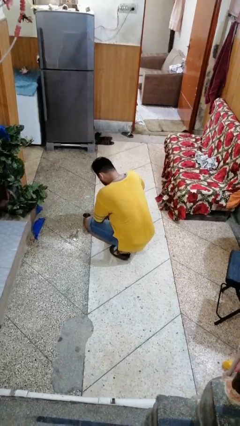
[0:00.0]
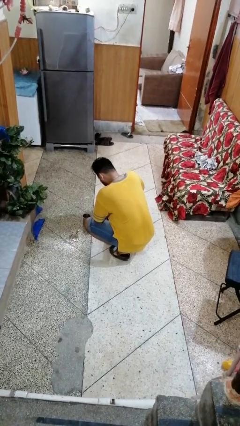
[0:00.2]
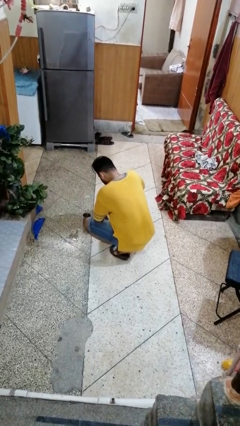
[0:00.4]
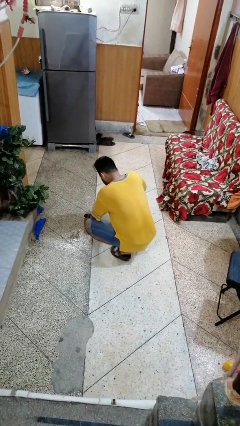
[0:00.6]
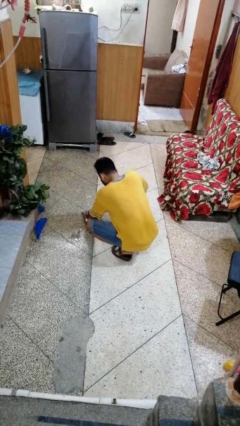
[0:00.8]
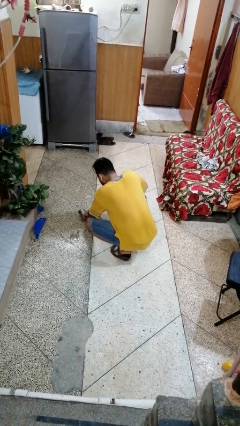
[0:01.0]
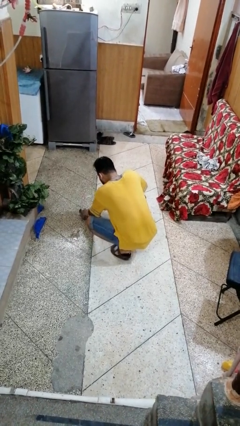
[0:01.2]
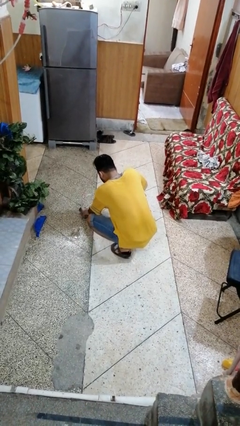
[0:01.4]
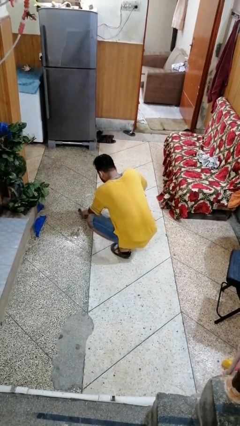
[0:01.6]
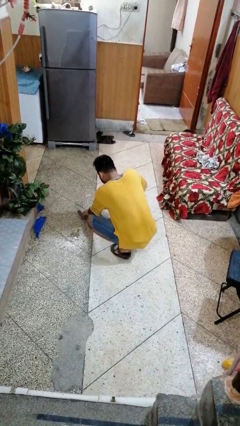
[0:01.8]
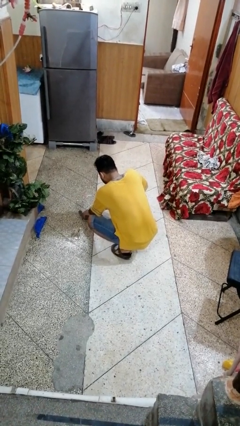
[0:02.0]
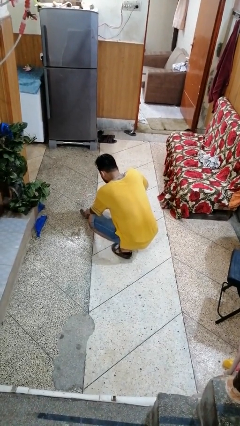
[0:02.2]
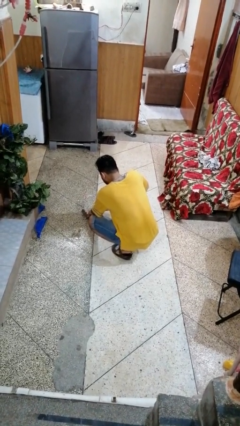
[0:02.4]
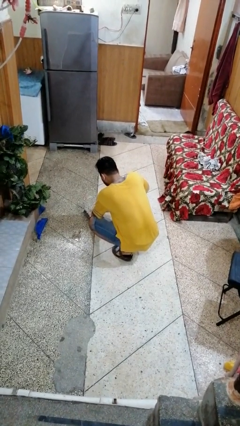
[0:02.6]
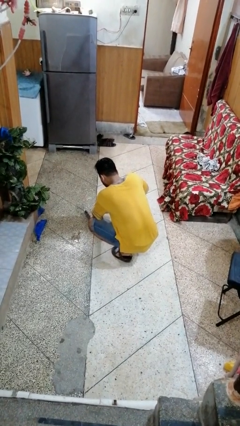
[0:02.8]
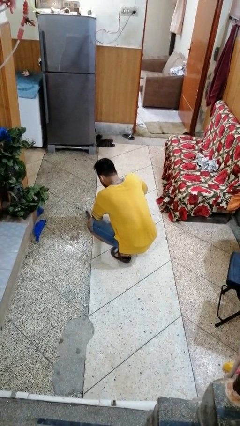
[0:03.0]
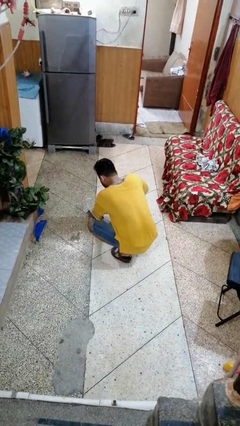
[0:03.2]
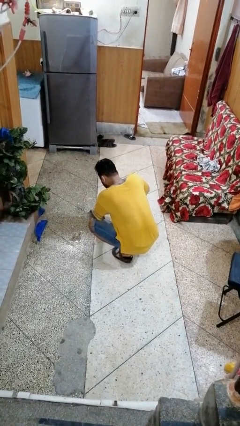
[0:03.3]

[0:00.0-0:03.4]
person spills on floor

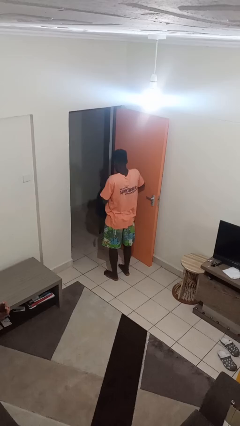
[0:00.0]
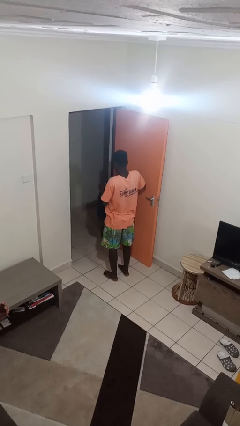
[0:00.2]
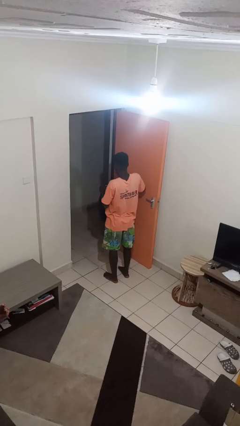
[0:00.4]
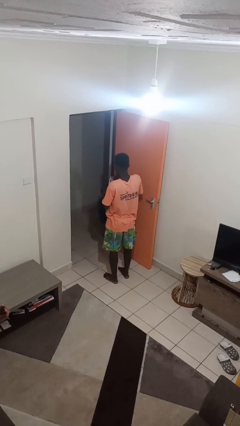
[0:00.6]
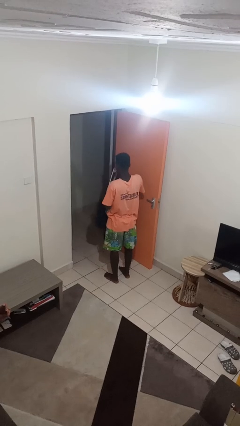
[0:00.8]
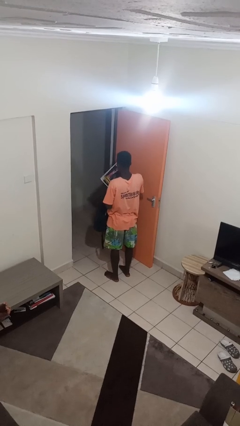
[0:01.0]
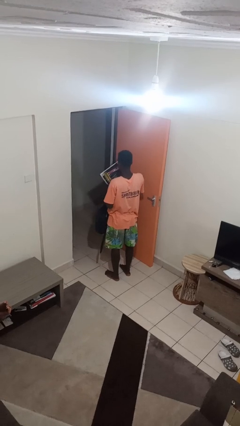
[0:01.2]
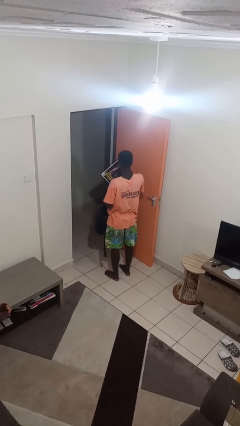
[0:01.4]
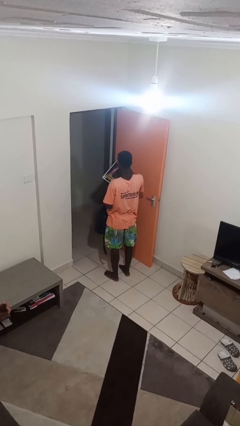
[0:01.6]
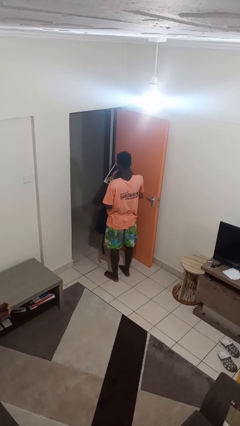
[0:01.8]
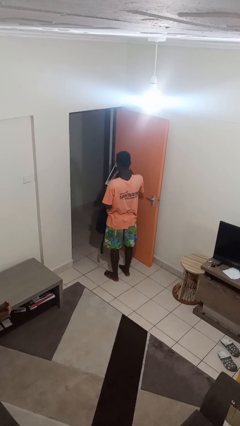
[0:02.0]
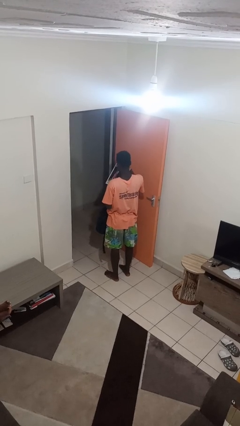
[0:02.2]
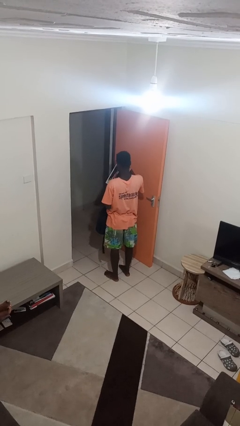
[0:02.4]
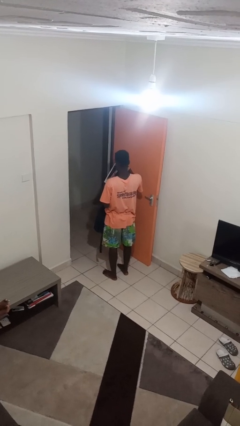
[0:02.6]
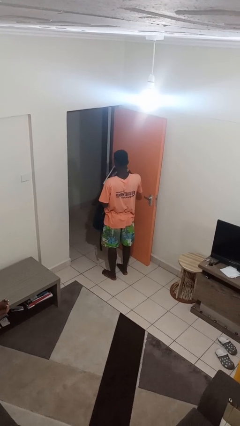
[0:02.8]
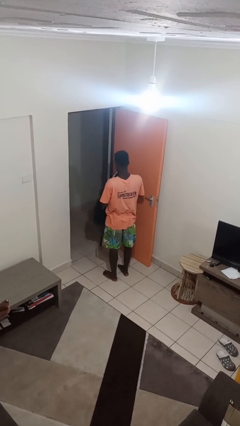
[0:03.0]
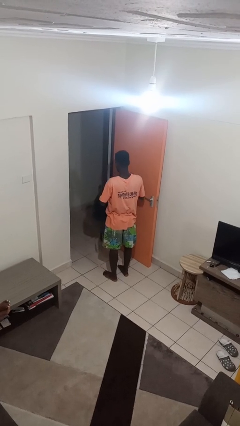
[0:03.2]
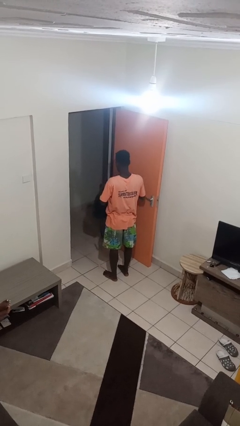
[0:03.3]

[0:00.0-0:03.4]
person takes object from backpack

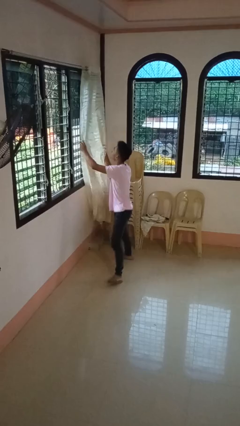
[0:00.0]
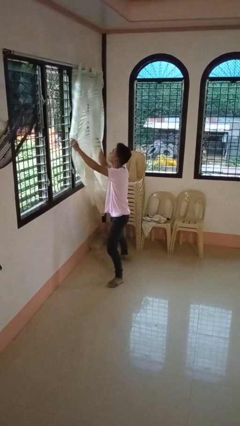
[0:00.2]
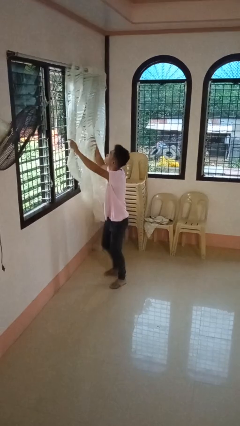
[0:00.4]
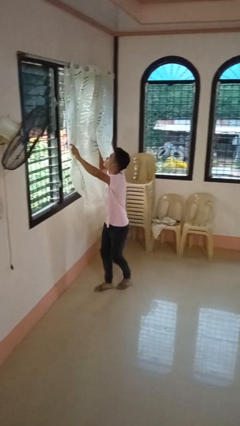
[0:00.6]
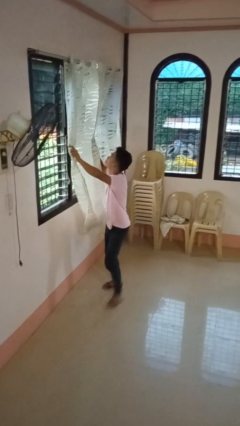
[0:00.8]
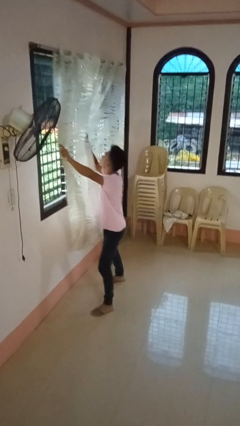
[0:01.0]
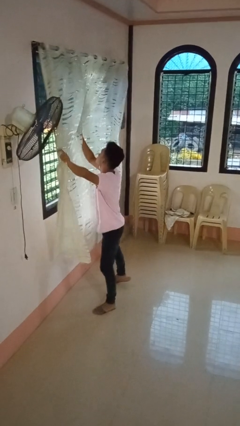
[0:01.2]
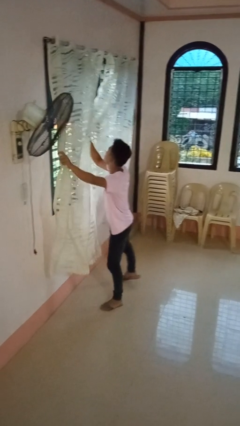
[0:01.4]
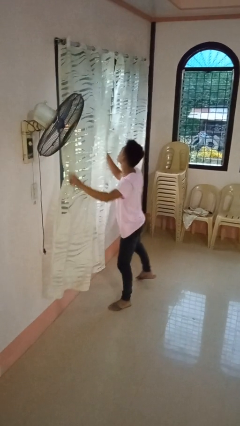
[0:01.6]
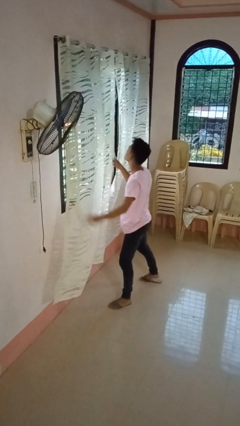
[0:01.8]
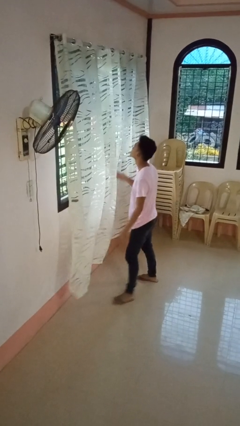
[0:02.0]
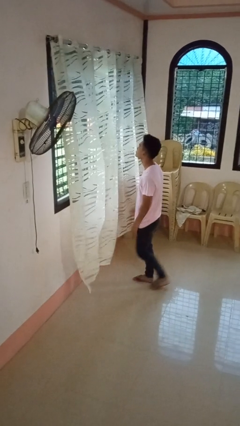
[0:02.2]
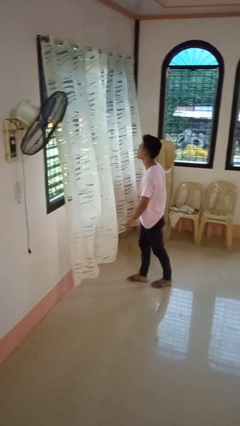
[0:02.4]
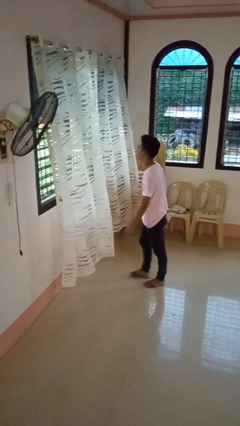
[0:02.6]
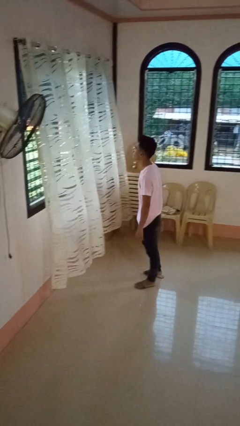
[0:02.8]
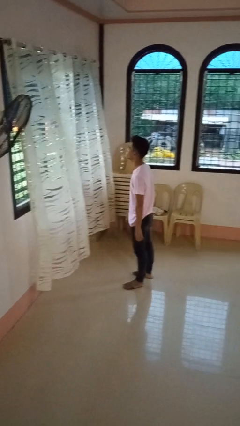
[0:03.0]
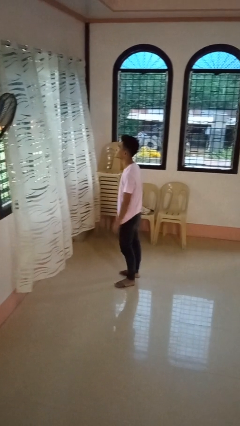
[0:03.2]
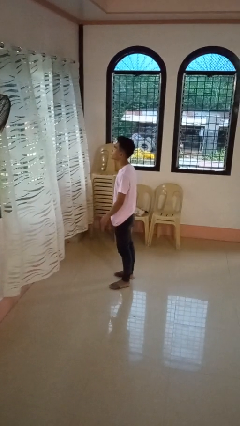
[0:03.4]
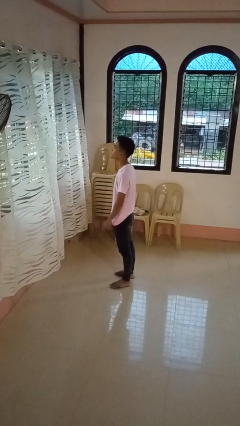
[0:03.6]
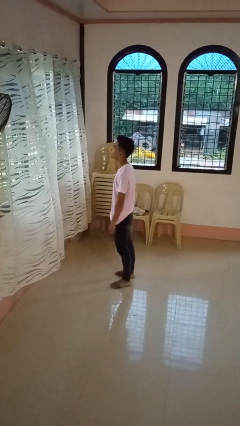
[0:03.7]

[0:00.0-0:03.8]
person closes curtains

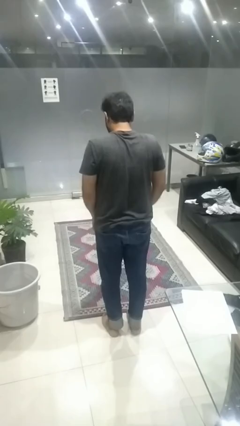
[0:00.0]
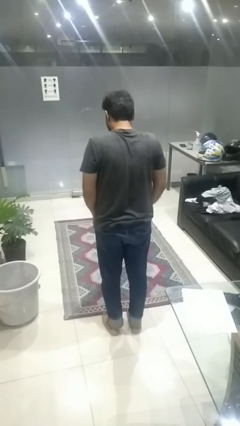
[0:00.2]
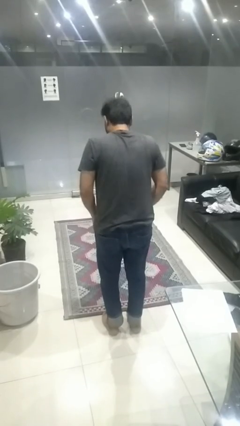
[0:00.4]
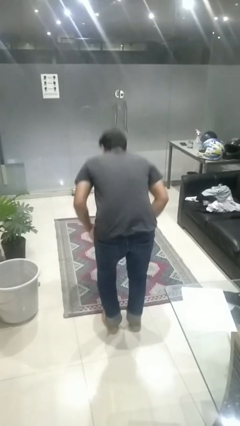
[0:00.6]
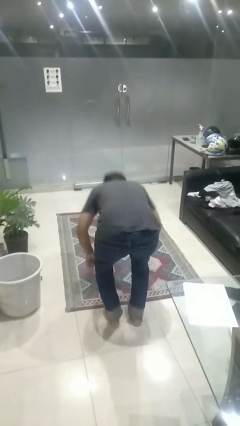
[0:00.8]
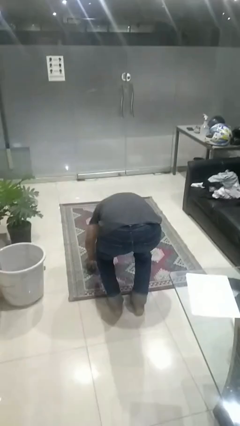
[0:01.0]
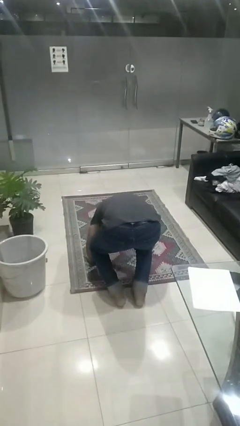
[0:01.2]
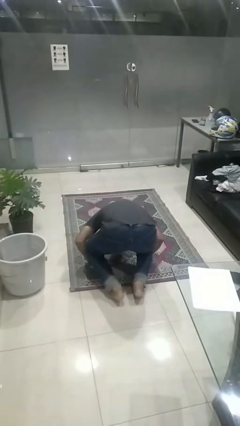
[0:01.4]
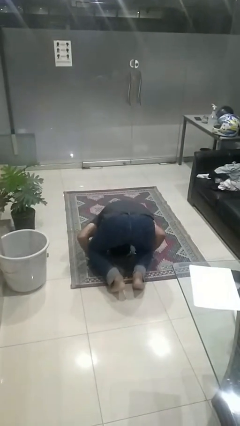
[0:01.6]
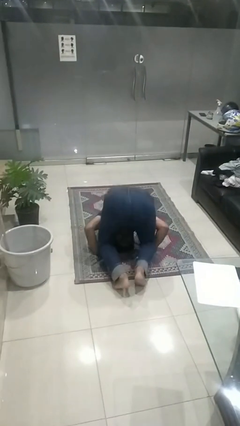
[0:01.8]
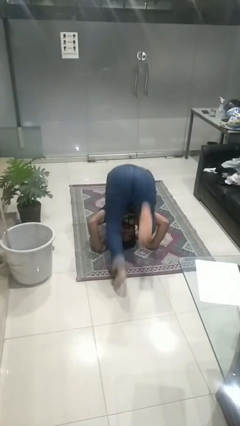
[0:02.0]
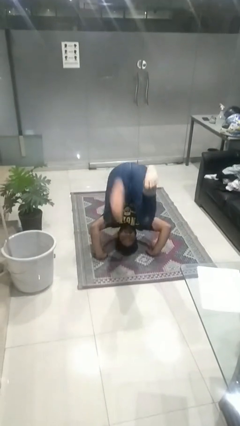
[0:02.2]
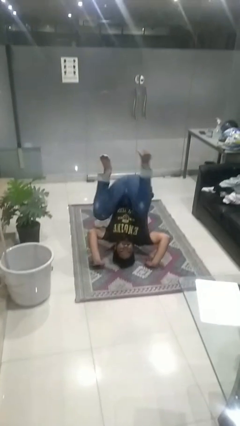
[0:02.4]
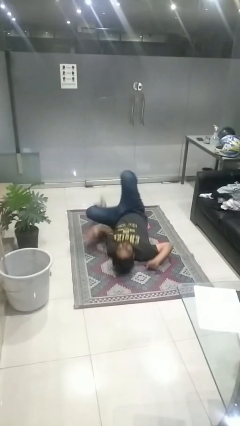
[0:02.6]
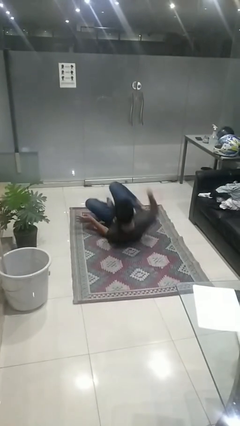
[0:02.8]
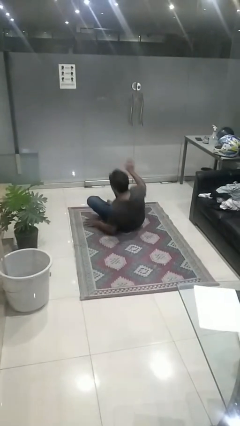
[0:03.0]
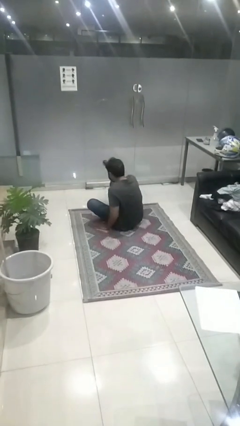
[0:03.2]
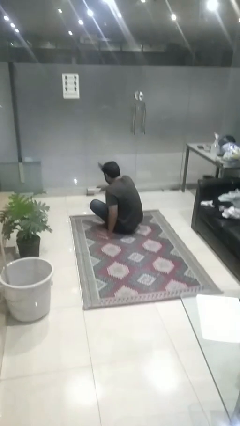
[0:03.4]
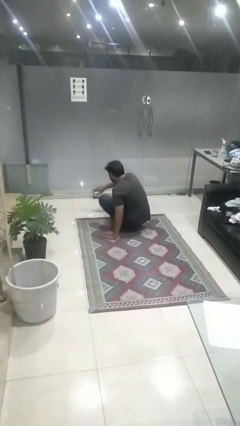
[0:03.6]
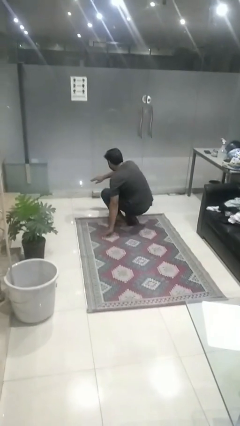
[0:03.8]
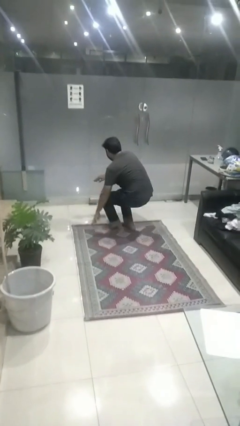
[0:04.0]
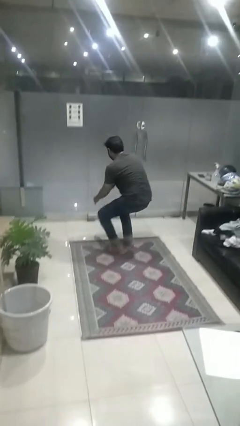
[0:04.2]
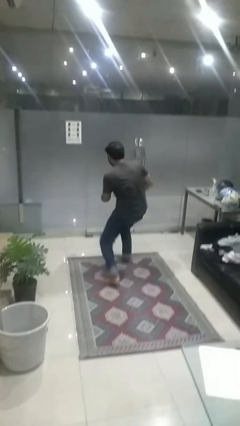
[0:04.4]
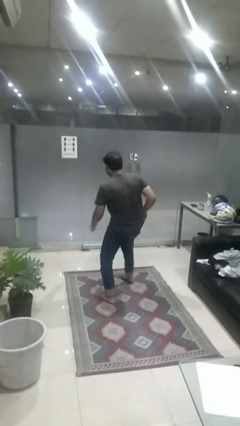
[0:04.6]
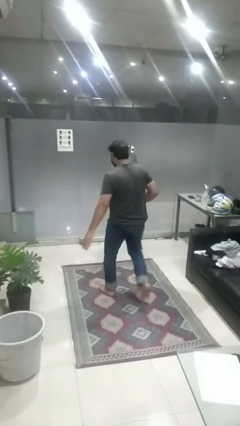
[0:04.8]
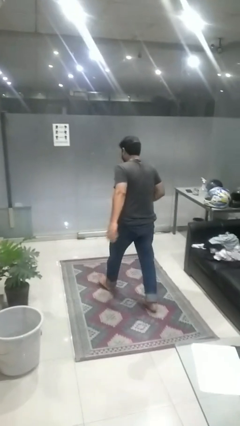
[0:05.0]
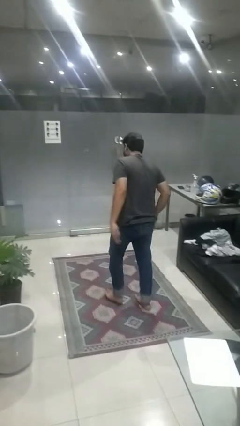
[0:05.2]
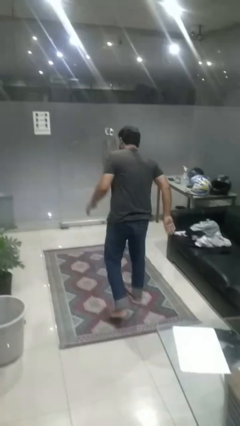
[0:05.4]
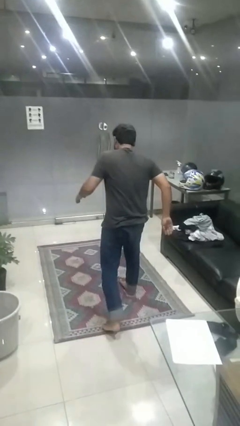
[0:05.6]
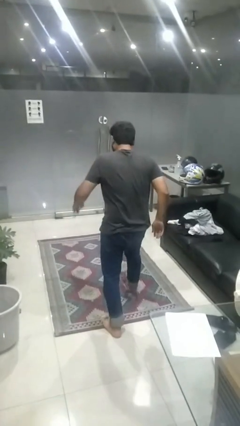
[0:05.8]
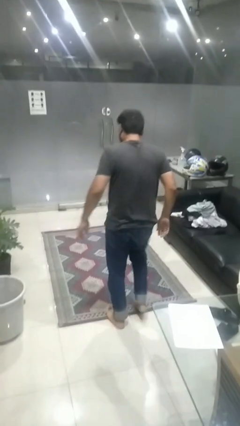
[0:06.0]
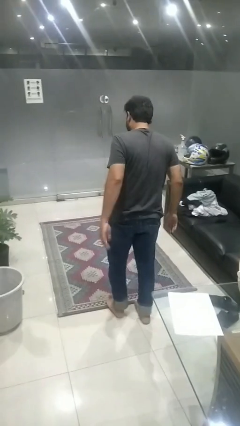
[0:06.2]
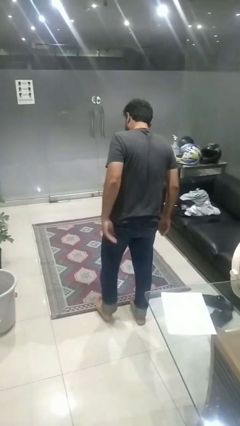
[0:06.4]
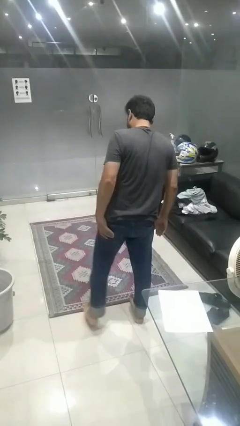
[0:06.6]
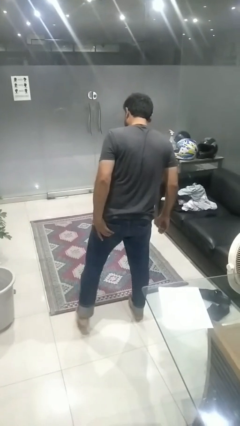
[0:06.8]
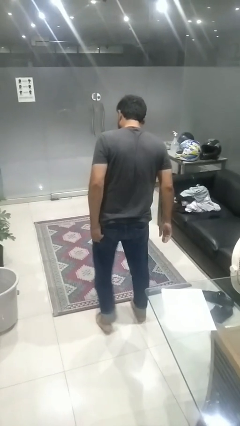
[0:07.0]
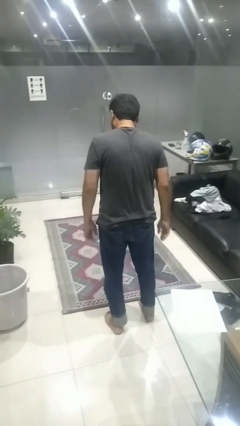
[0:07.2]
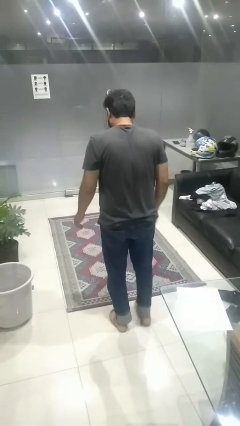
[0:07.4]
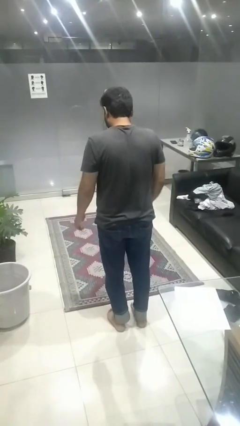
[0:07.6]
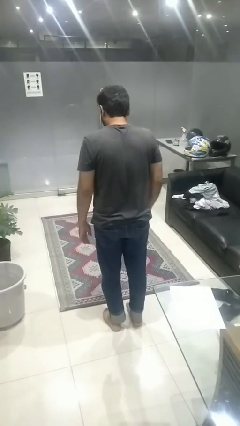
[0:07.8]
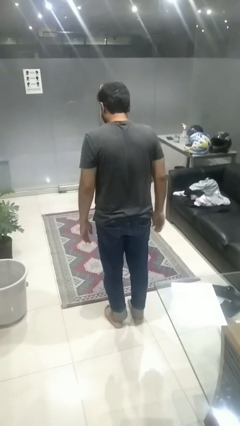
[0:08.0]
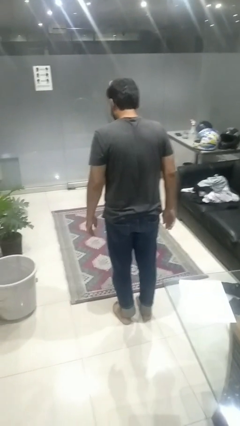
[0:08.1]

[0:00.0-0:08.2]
person somersaults
